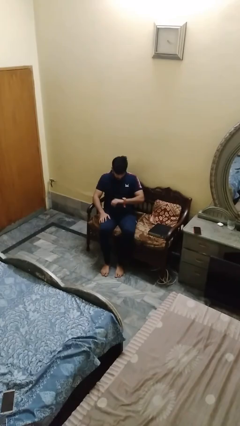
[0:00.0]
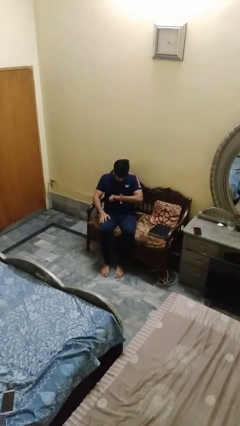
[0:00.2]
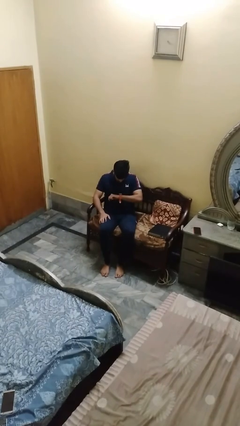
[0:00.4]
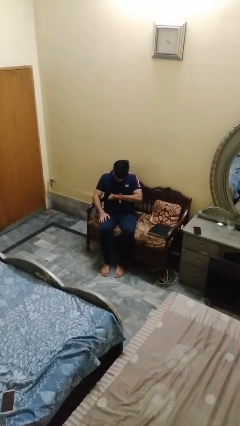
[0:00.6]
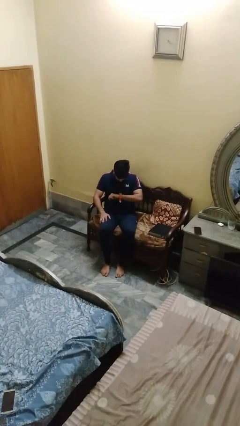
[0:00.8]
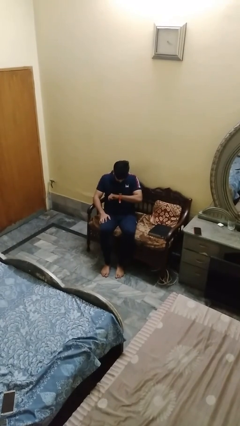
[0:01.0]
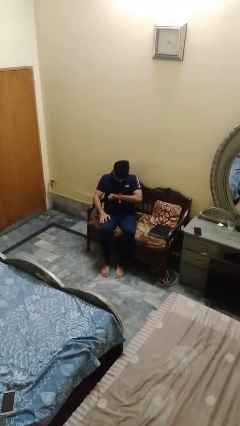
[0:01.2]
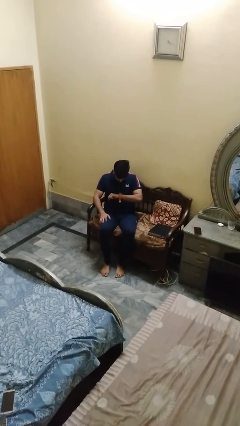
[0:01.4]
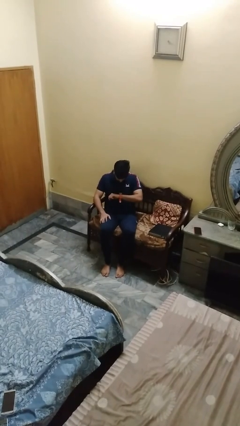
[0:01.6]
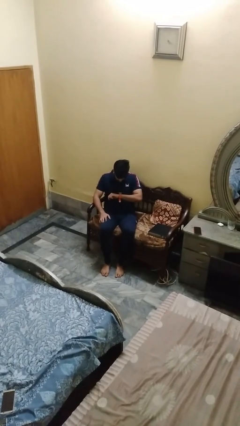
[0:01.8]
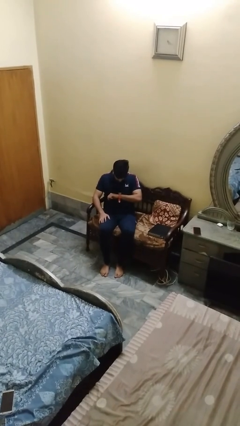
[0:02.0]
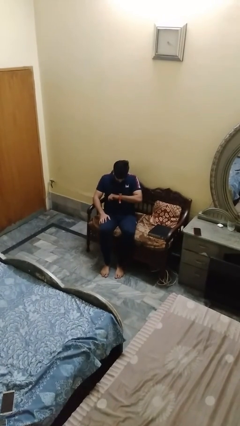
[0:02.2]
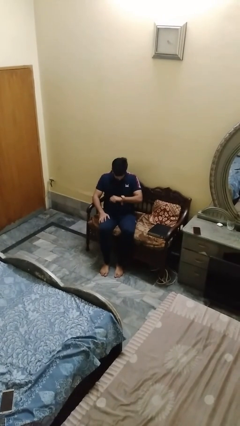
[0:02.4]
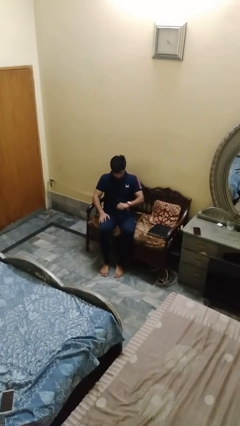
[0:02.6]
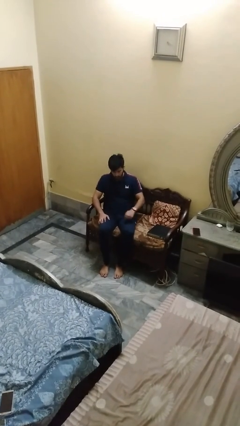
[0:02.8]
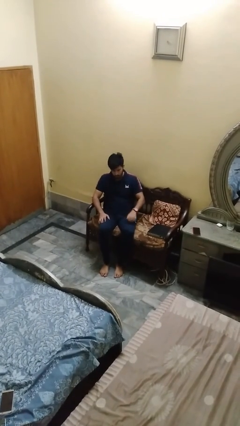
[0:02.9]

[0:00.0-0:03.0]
person looks at wristwatch

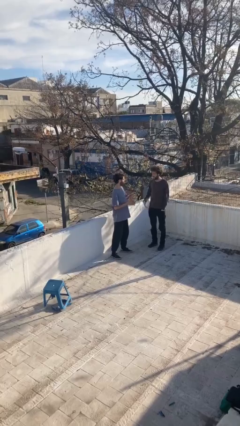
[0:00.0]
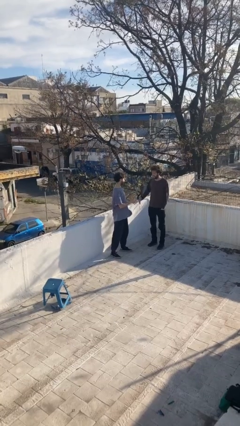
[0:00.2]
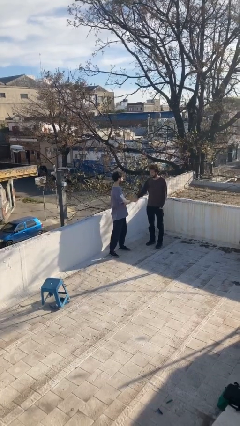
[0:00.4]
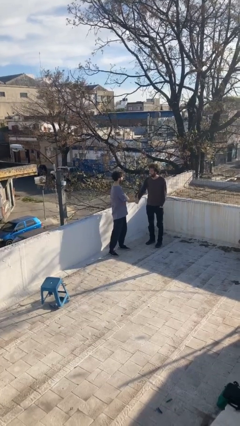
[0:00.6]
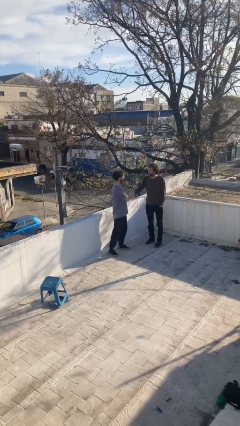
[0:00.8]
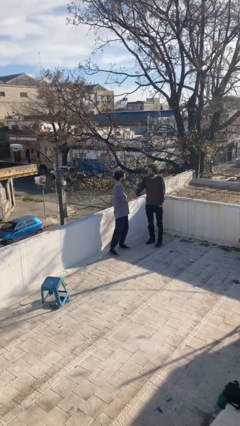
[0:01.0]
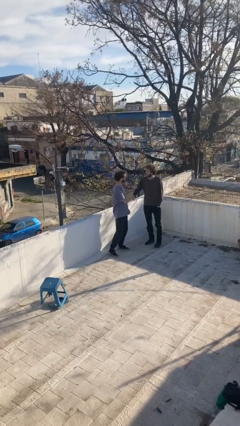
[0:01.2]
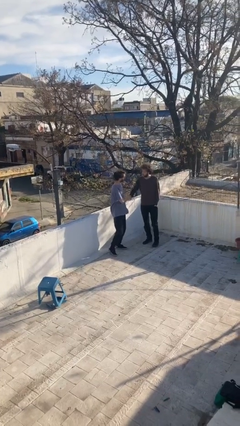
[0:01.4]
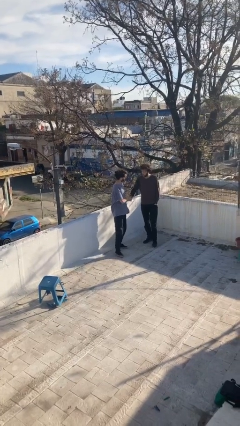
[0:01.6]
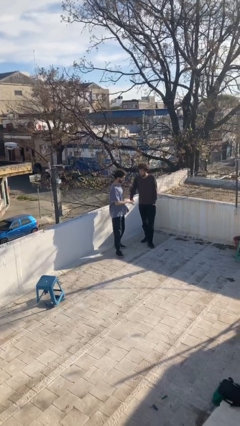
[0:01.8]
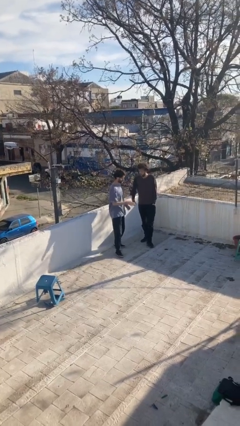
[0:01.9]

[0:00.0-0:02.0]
person shakes hand

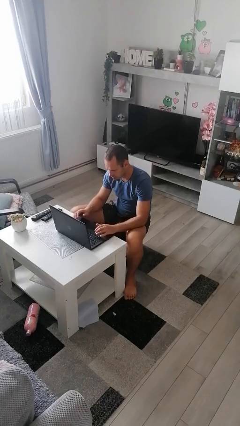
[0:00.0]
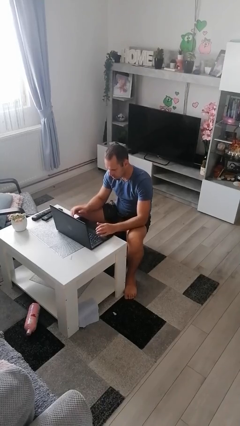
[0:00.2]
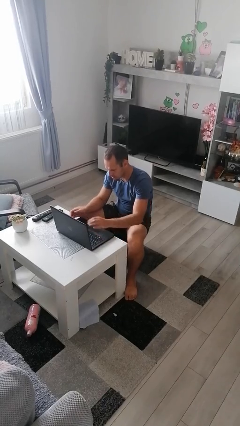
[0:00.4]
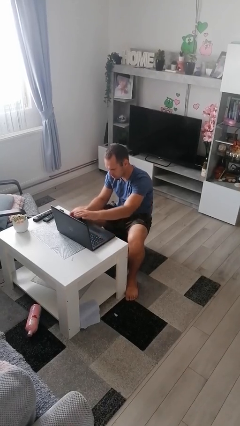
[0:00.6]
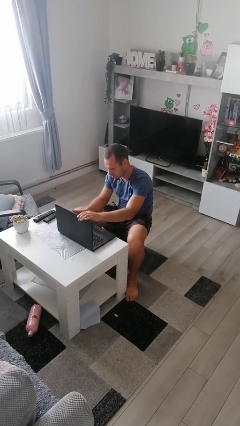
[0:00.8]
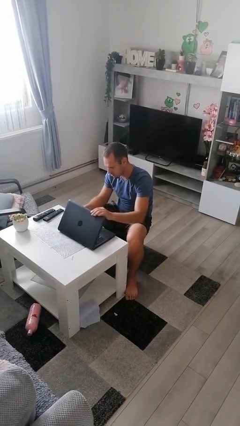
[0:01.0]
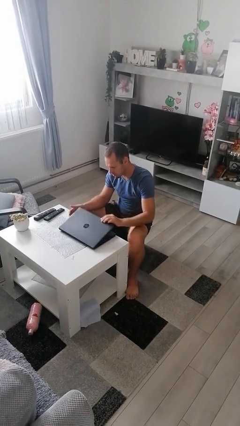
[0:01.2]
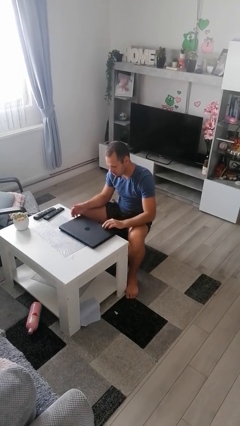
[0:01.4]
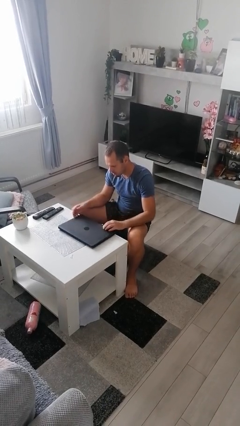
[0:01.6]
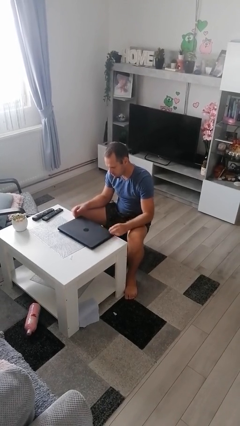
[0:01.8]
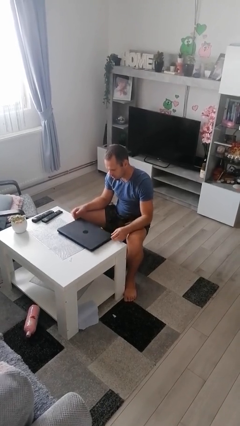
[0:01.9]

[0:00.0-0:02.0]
person closes laptop

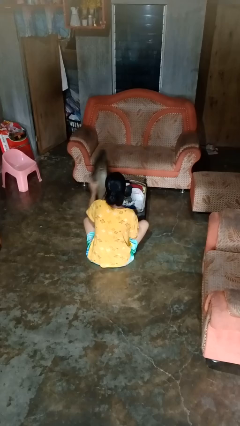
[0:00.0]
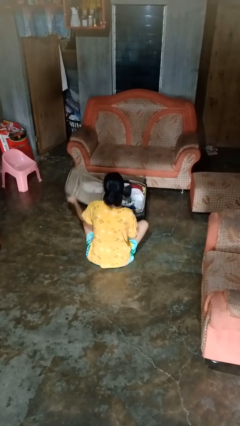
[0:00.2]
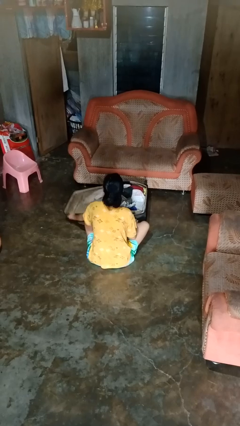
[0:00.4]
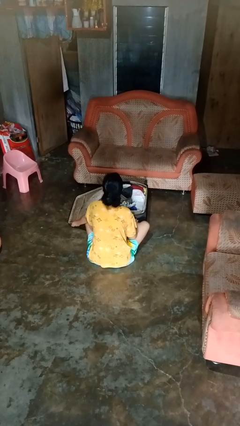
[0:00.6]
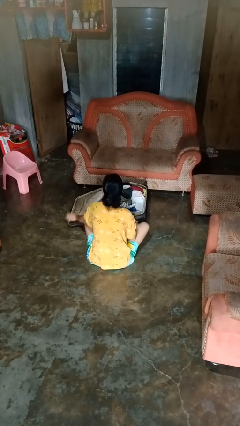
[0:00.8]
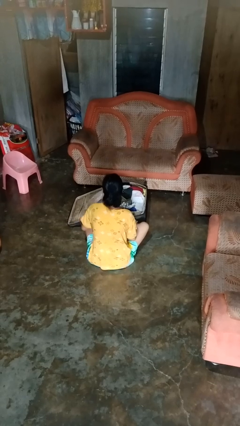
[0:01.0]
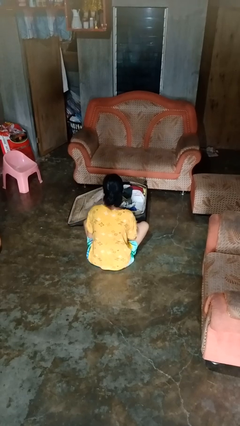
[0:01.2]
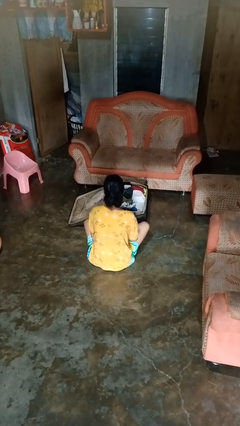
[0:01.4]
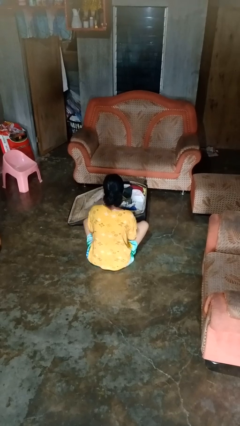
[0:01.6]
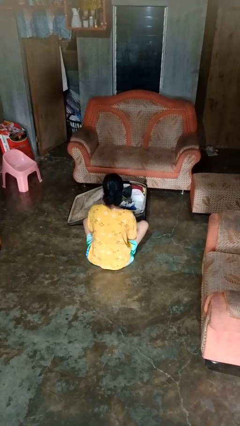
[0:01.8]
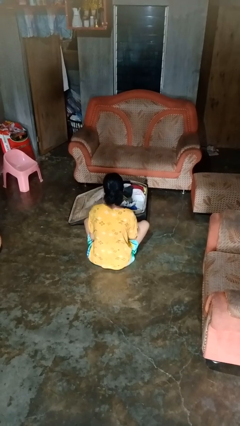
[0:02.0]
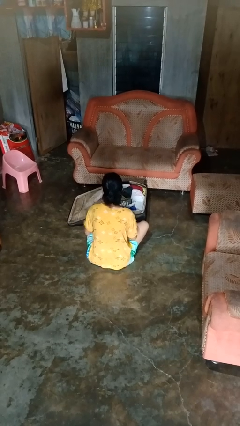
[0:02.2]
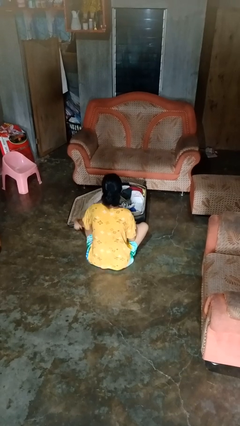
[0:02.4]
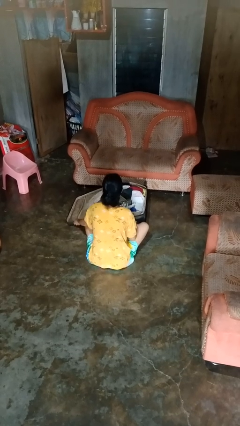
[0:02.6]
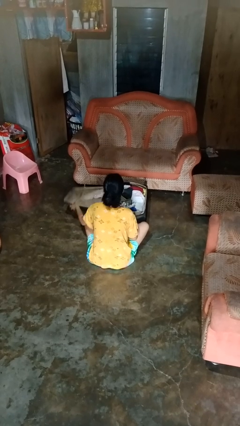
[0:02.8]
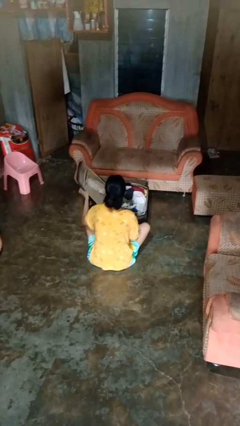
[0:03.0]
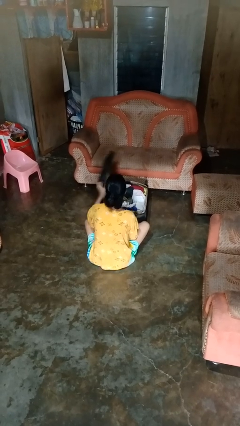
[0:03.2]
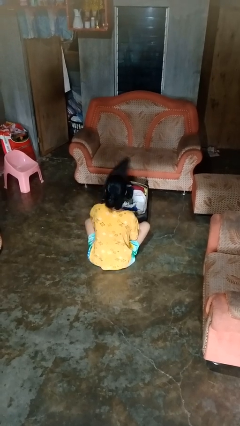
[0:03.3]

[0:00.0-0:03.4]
person opens suitcase

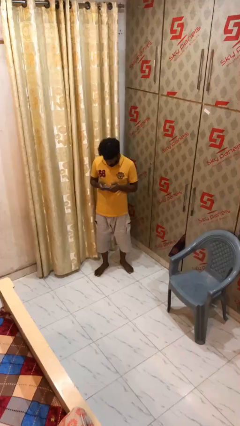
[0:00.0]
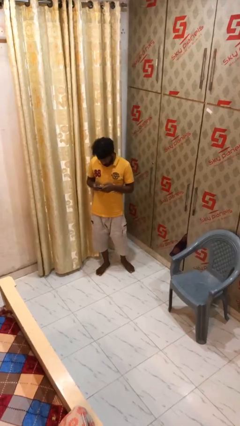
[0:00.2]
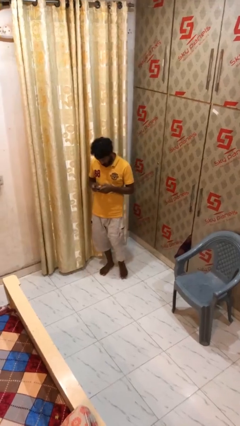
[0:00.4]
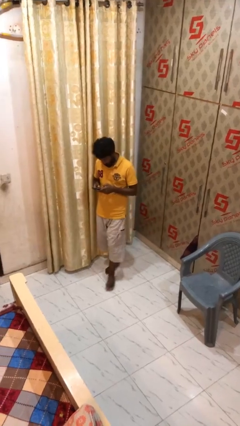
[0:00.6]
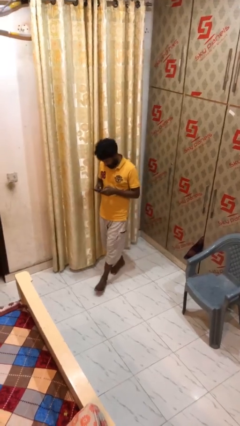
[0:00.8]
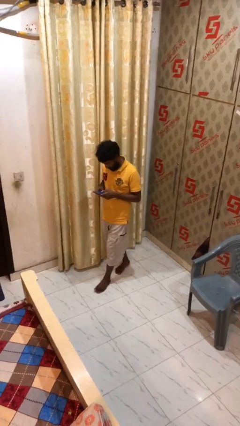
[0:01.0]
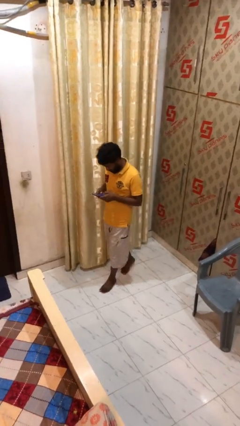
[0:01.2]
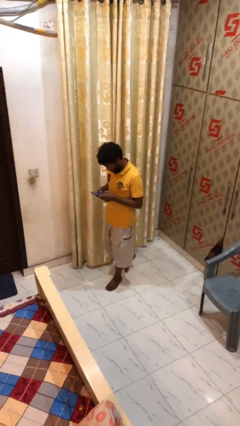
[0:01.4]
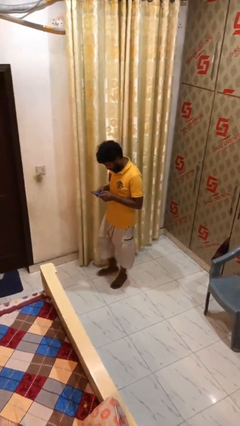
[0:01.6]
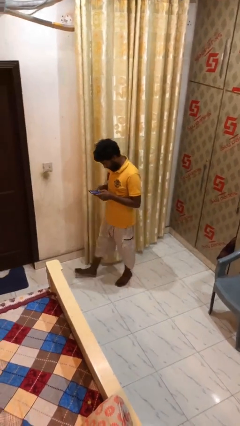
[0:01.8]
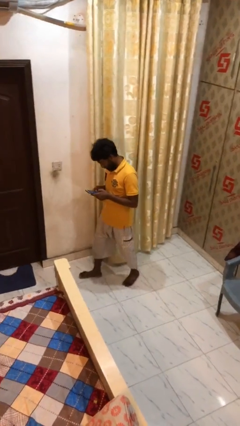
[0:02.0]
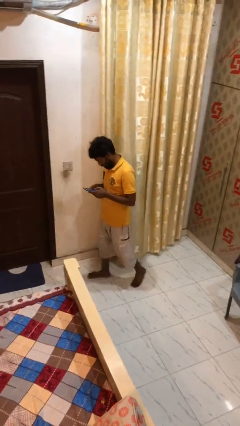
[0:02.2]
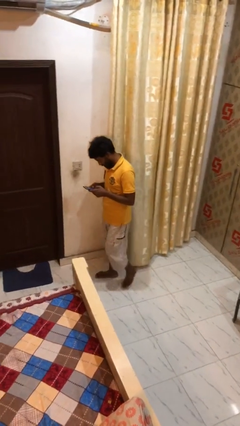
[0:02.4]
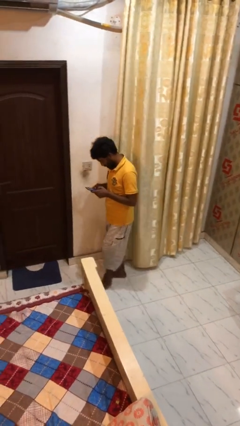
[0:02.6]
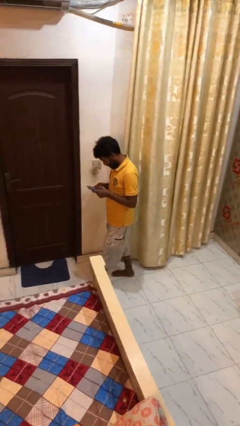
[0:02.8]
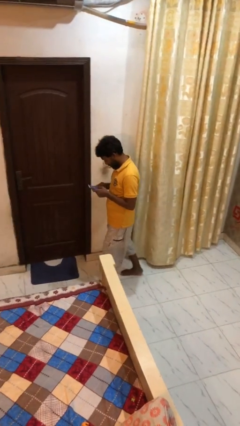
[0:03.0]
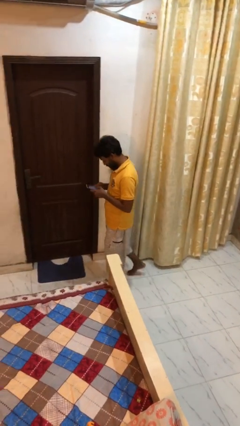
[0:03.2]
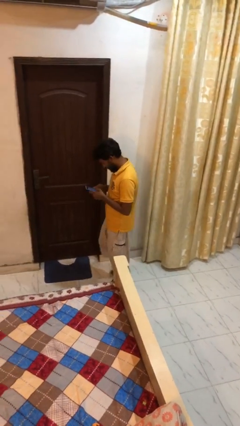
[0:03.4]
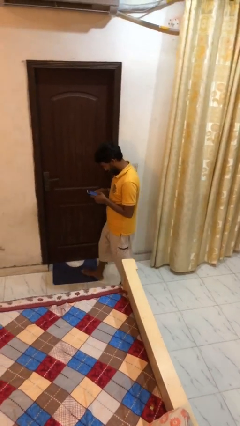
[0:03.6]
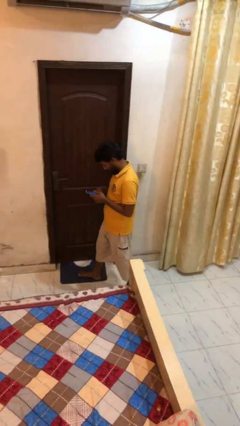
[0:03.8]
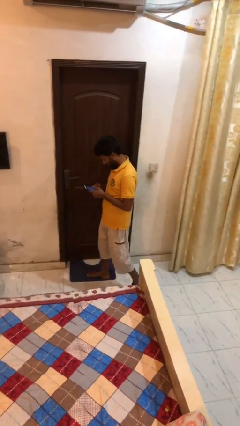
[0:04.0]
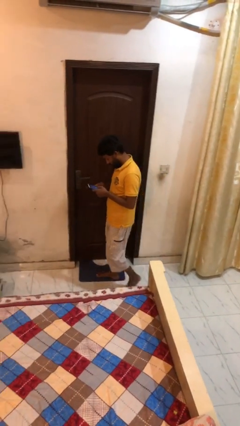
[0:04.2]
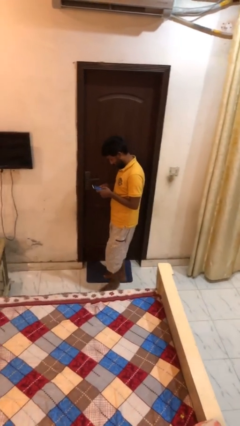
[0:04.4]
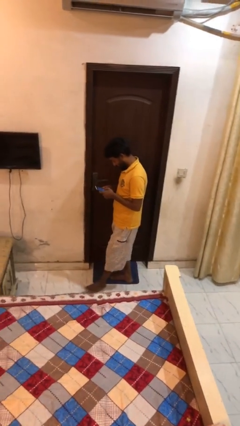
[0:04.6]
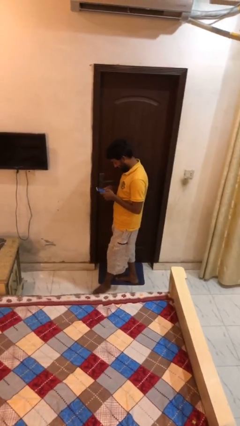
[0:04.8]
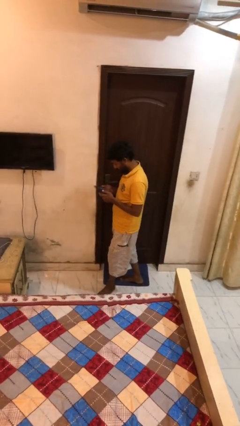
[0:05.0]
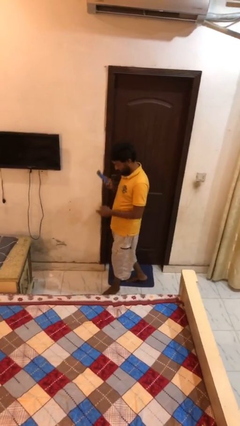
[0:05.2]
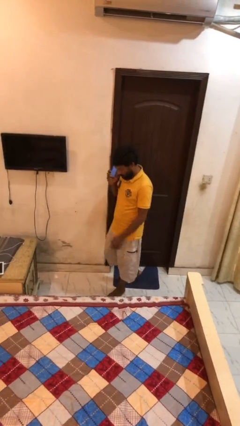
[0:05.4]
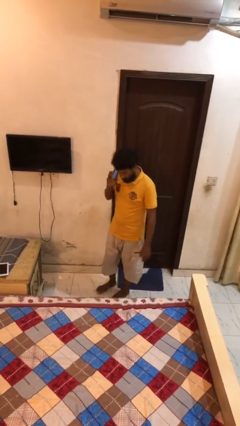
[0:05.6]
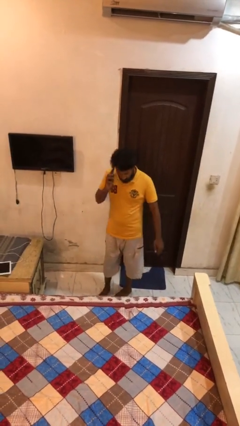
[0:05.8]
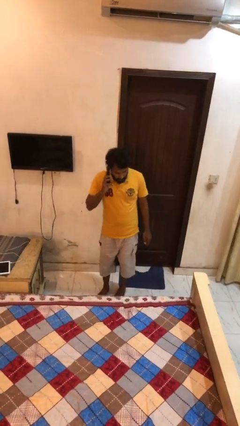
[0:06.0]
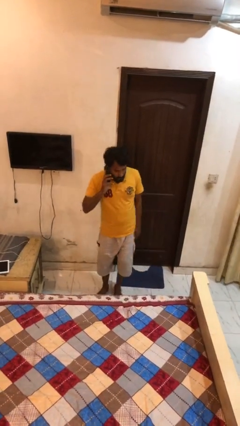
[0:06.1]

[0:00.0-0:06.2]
person texts on phone

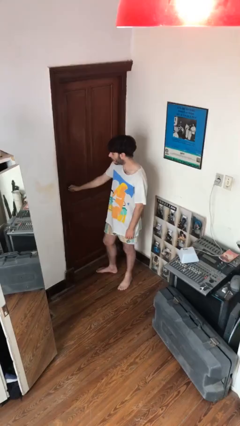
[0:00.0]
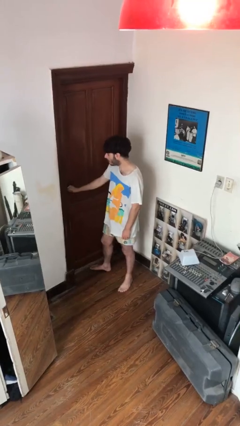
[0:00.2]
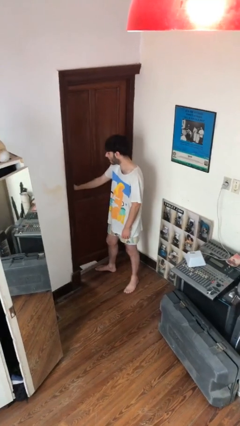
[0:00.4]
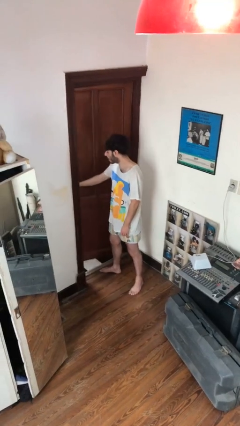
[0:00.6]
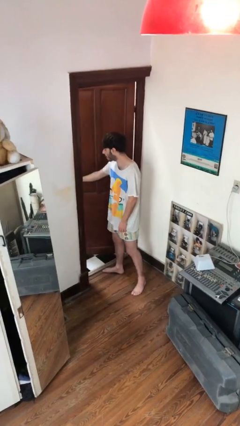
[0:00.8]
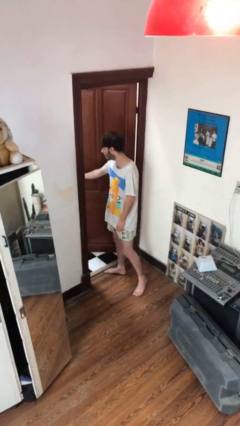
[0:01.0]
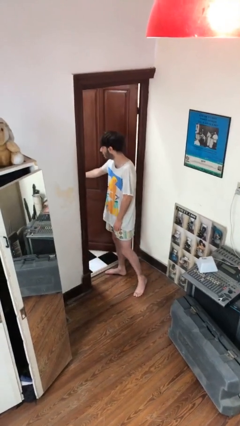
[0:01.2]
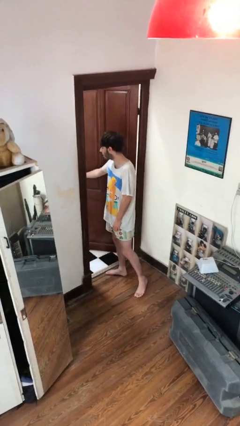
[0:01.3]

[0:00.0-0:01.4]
person opens facility door
